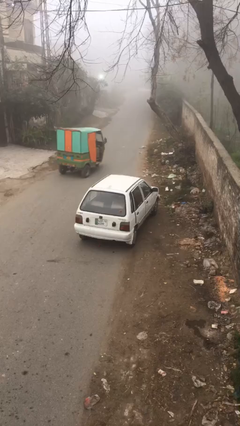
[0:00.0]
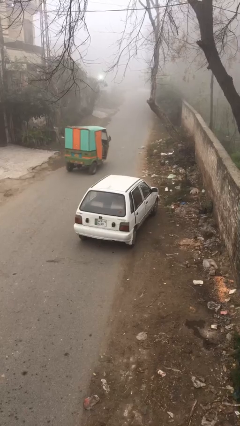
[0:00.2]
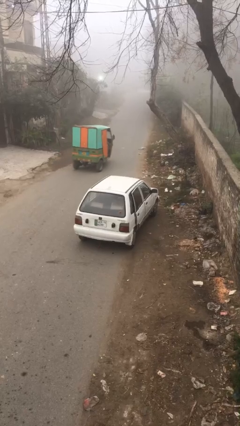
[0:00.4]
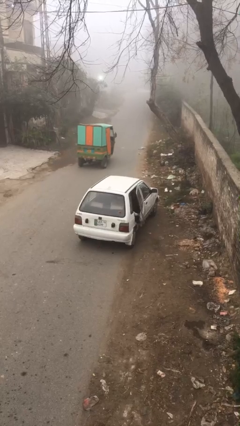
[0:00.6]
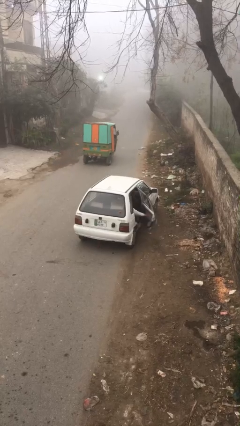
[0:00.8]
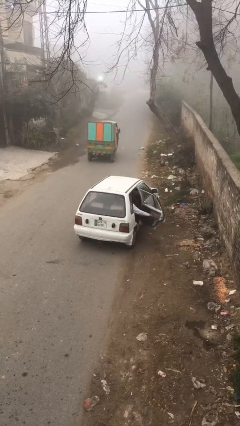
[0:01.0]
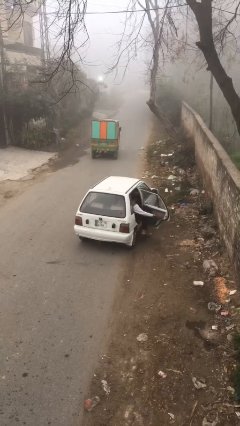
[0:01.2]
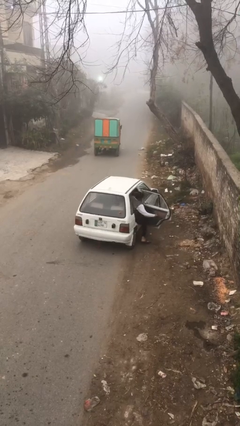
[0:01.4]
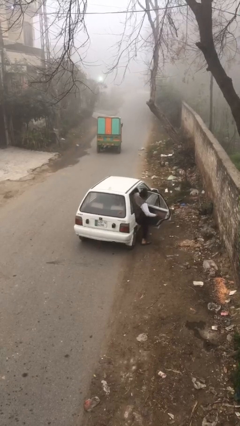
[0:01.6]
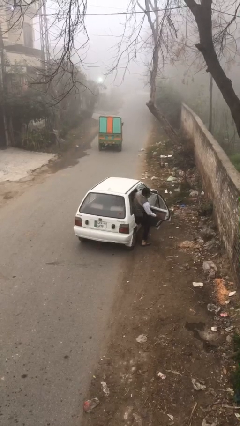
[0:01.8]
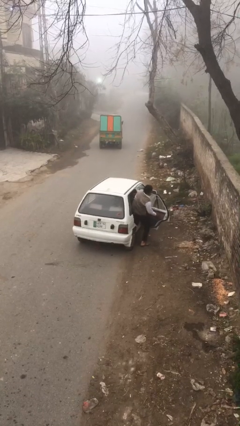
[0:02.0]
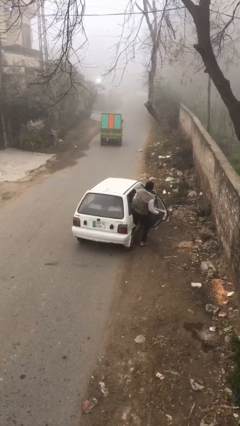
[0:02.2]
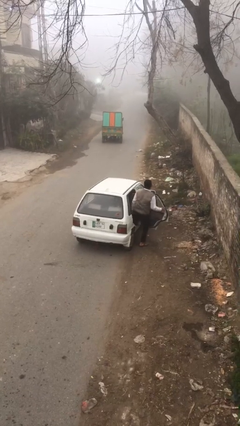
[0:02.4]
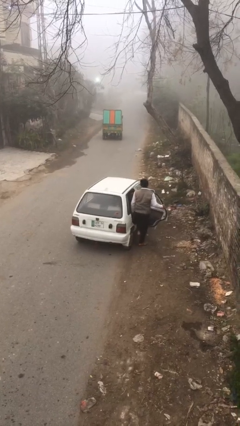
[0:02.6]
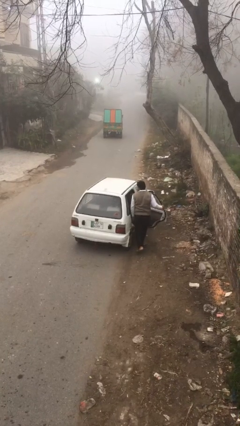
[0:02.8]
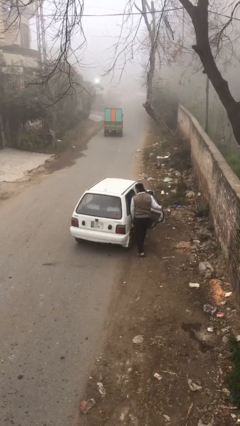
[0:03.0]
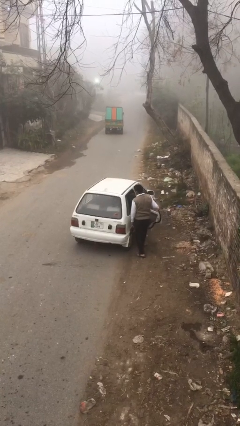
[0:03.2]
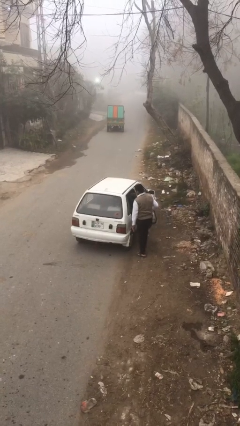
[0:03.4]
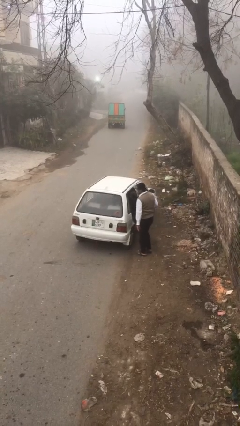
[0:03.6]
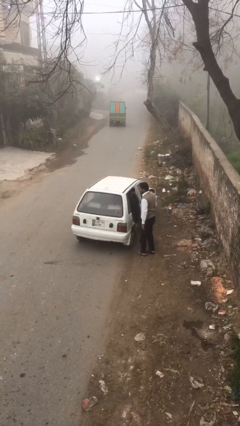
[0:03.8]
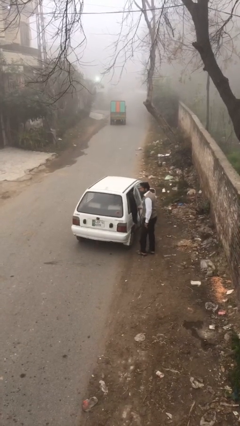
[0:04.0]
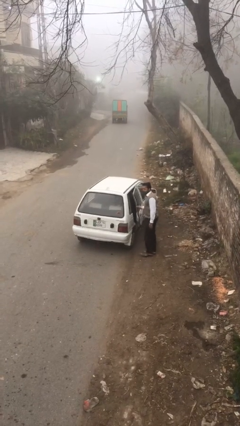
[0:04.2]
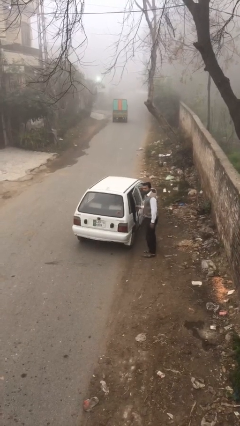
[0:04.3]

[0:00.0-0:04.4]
car drops off person

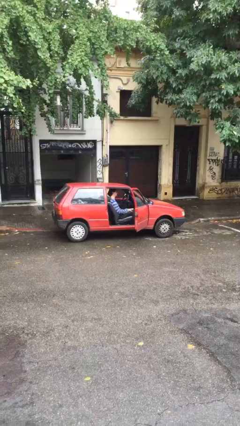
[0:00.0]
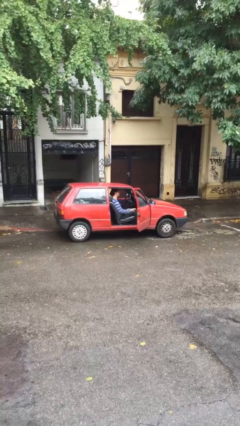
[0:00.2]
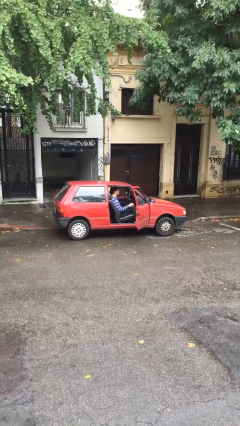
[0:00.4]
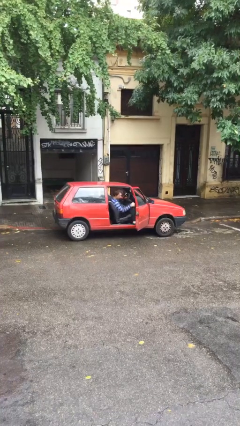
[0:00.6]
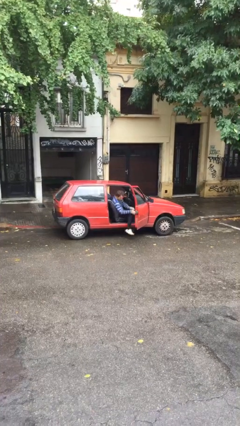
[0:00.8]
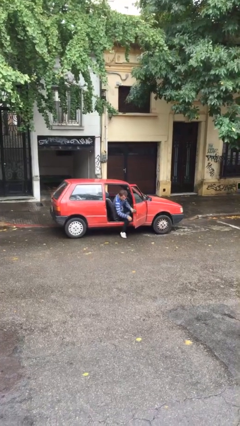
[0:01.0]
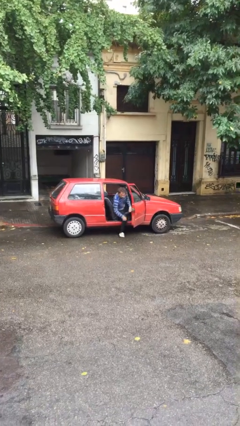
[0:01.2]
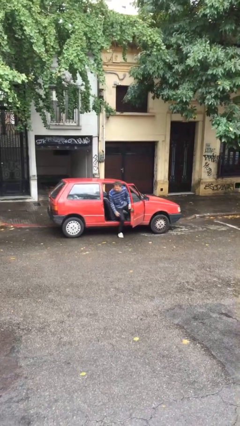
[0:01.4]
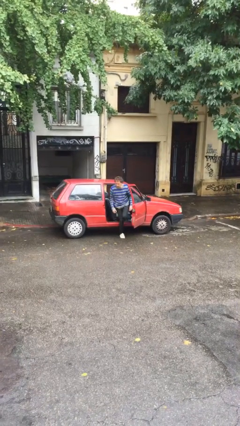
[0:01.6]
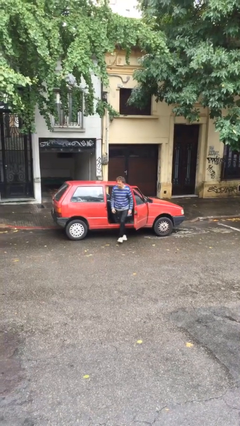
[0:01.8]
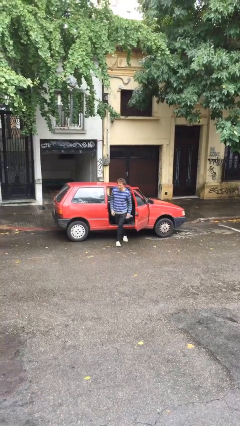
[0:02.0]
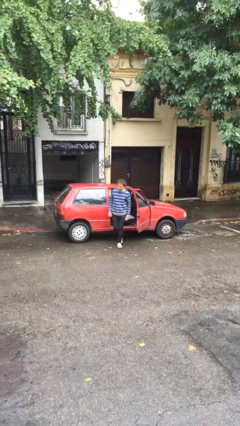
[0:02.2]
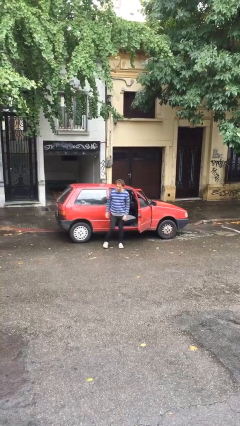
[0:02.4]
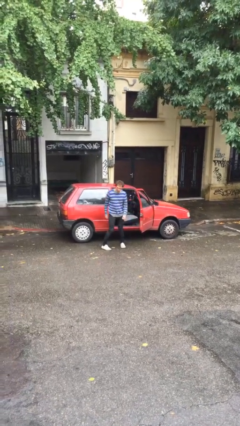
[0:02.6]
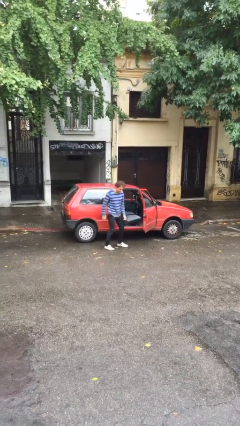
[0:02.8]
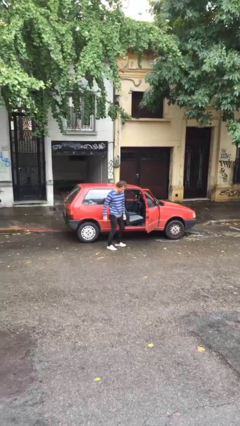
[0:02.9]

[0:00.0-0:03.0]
person exits car

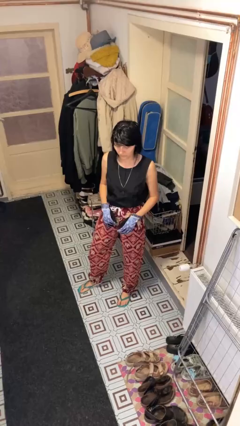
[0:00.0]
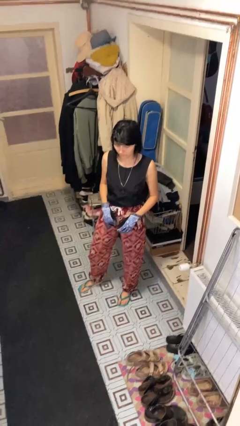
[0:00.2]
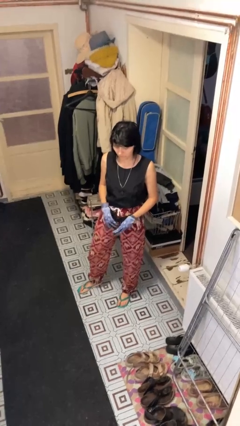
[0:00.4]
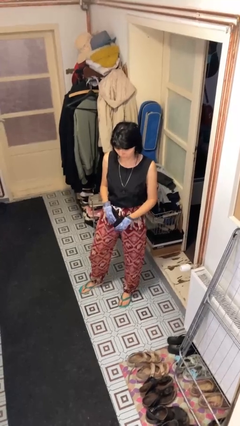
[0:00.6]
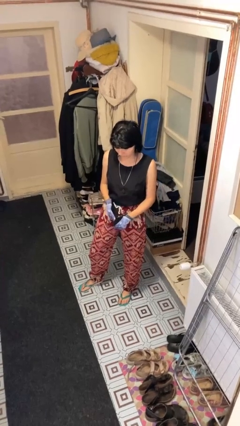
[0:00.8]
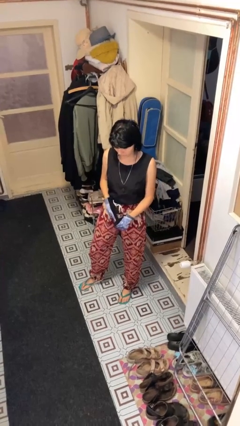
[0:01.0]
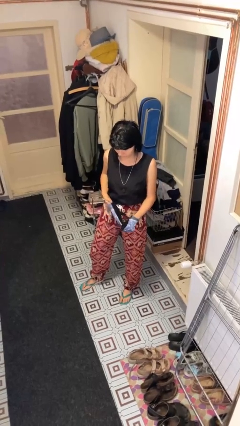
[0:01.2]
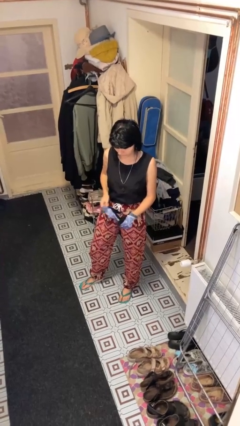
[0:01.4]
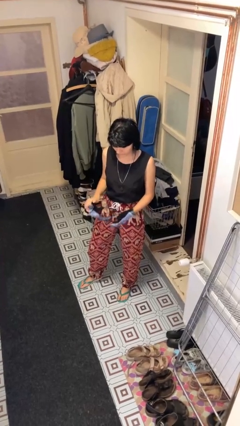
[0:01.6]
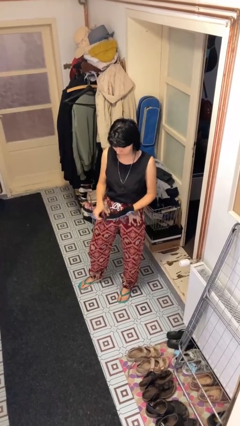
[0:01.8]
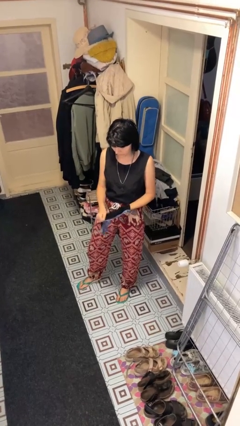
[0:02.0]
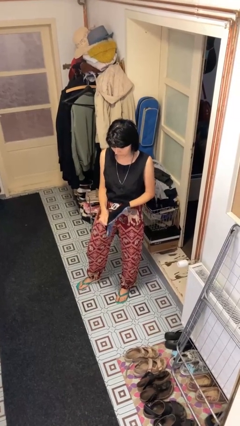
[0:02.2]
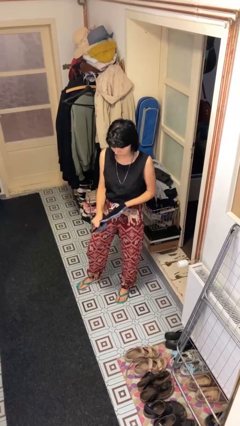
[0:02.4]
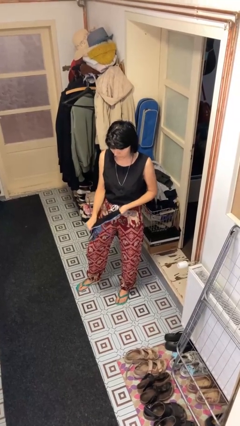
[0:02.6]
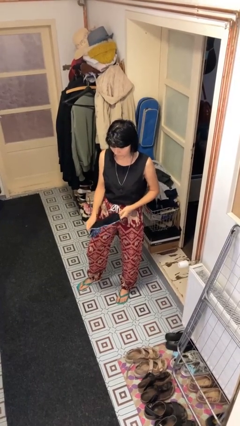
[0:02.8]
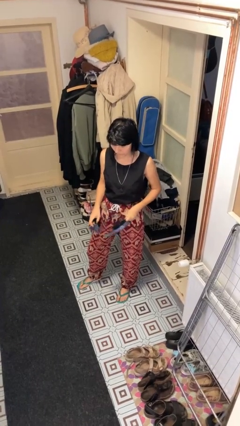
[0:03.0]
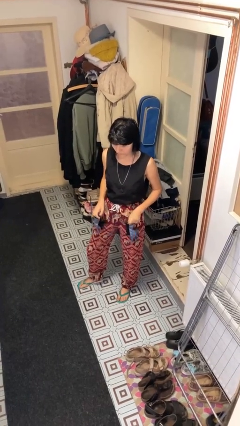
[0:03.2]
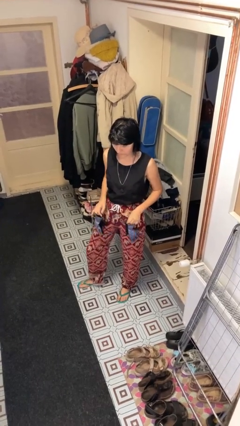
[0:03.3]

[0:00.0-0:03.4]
person takes off gloves

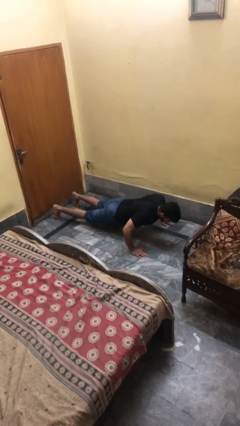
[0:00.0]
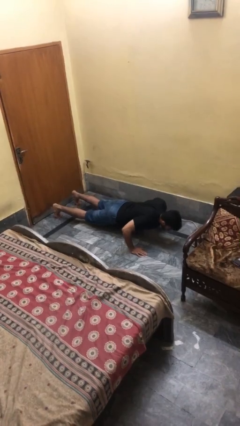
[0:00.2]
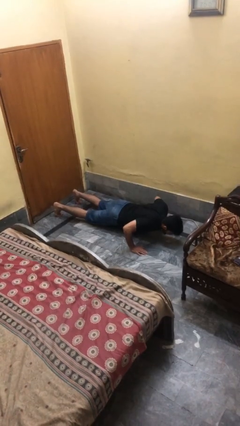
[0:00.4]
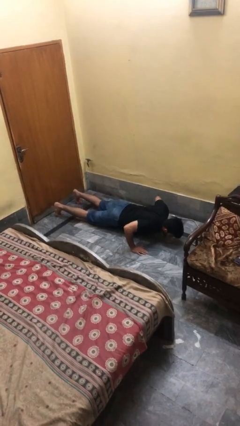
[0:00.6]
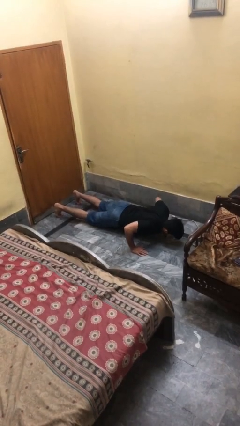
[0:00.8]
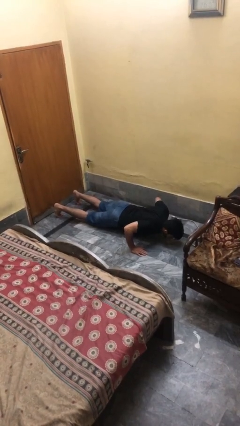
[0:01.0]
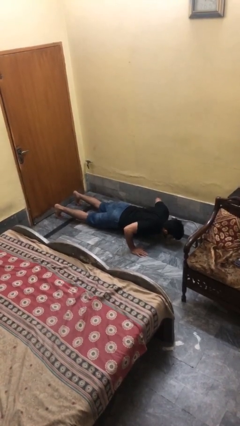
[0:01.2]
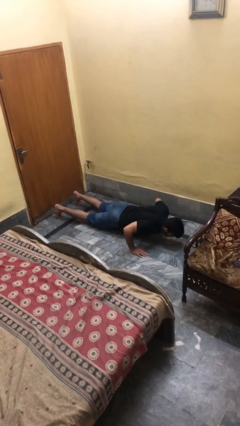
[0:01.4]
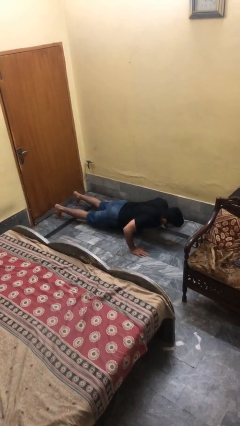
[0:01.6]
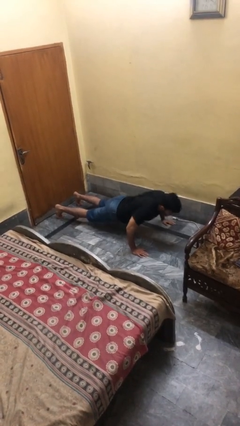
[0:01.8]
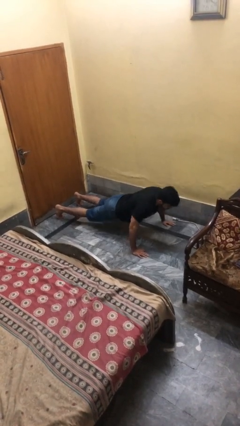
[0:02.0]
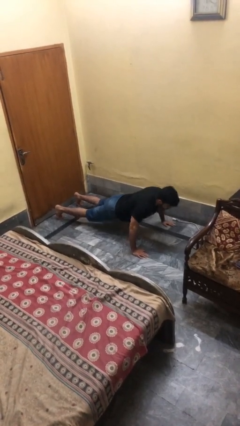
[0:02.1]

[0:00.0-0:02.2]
person exercises with pushup

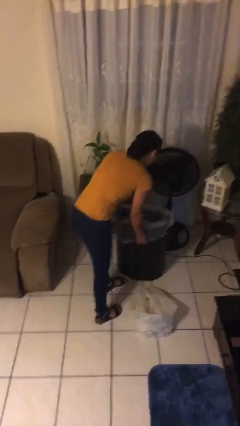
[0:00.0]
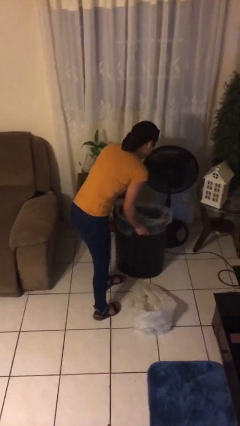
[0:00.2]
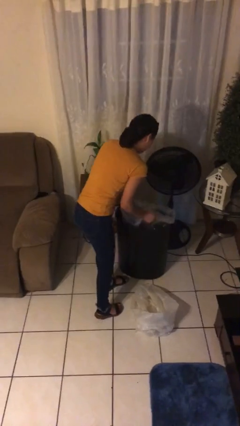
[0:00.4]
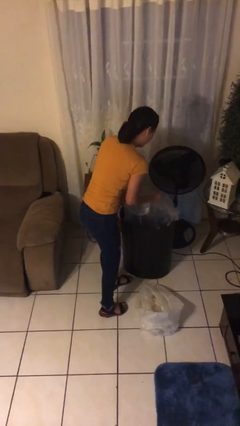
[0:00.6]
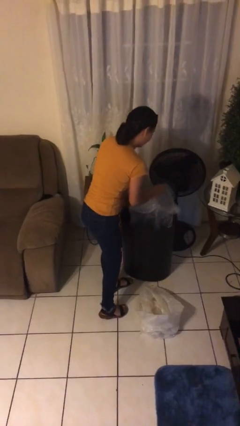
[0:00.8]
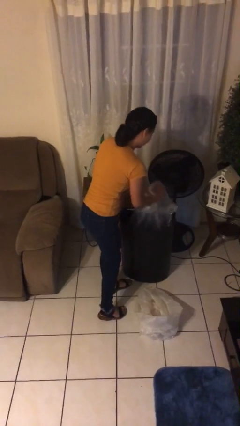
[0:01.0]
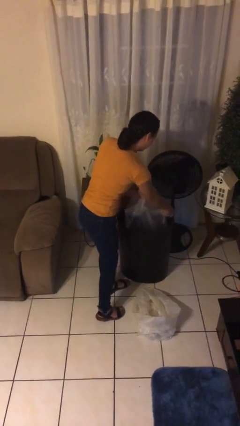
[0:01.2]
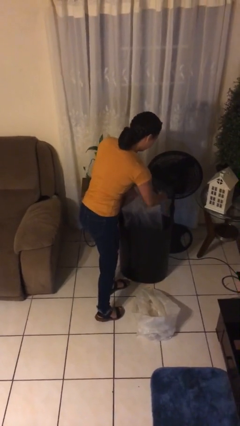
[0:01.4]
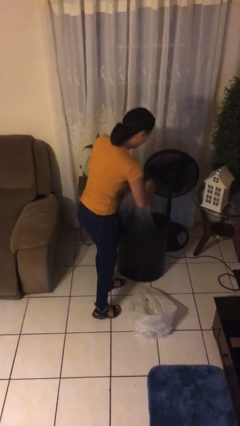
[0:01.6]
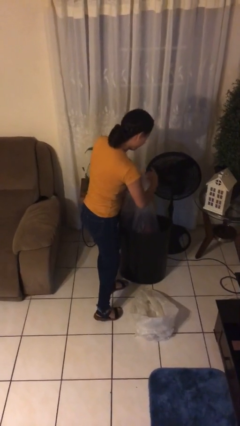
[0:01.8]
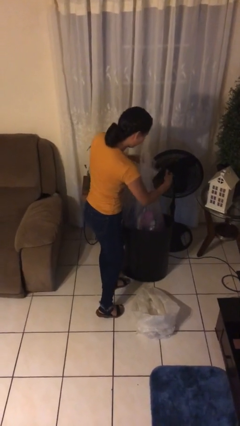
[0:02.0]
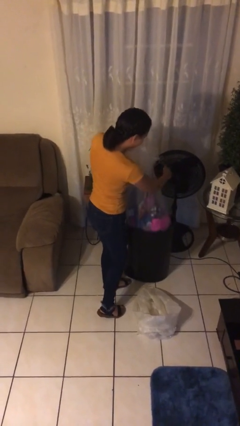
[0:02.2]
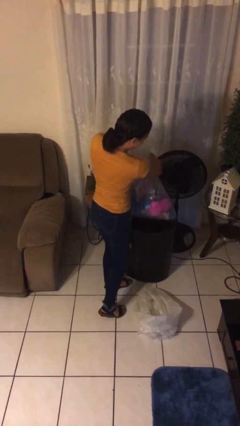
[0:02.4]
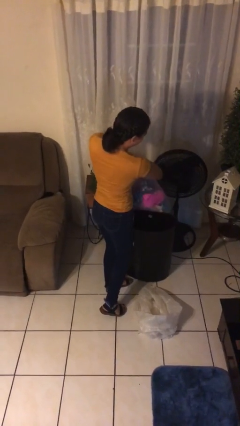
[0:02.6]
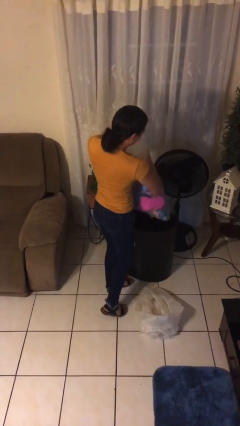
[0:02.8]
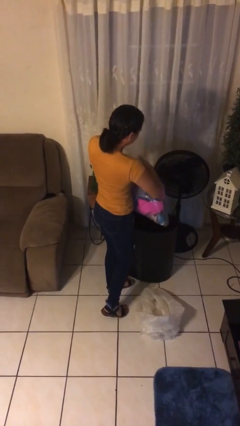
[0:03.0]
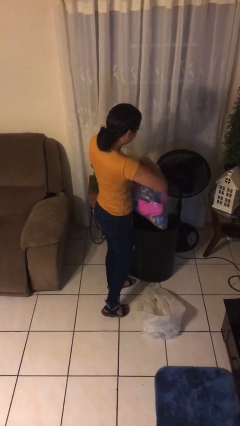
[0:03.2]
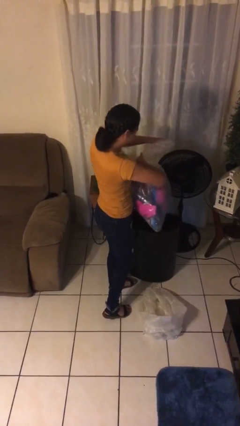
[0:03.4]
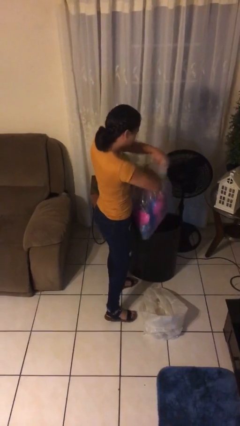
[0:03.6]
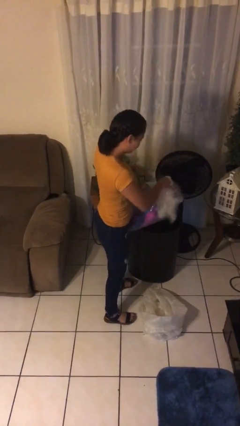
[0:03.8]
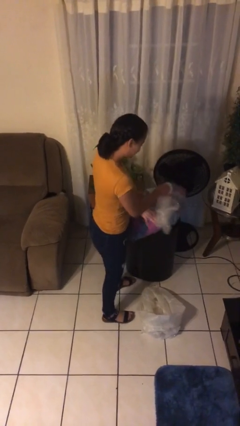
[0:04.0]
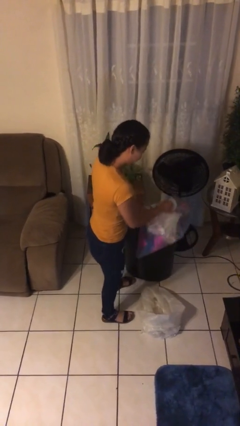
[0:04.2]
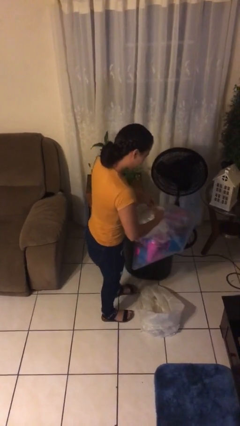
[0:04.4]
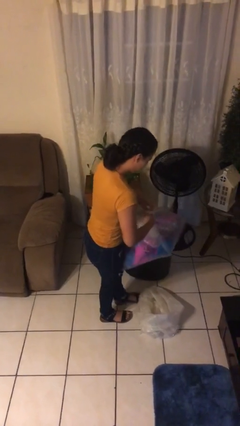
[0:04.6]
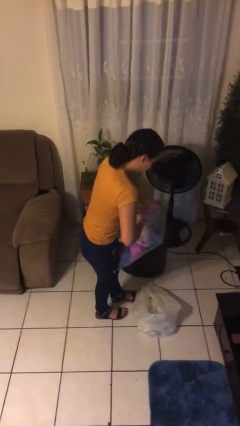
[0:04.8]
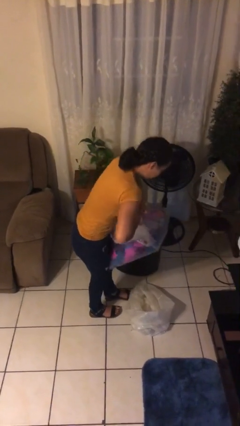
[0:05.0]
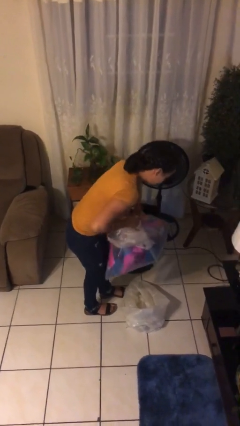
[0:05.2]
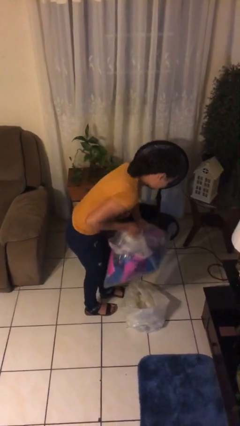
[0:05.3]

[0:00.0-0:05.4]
person removes trashbag from trashcan
